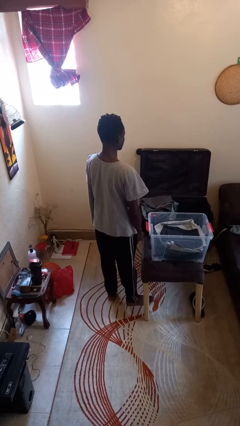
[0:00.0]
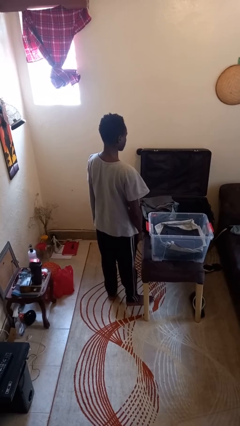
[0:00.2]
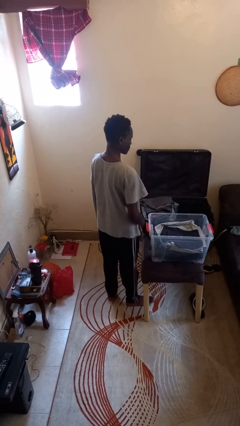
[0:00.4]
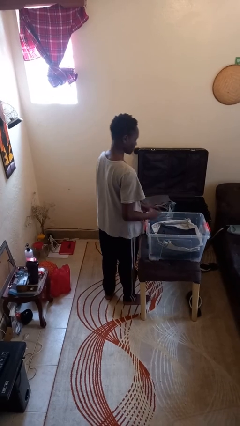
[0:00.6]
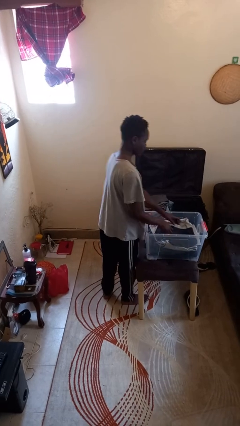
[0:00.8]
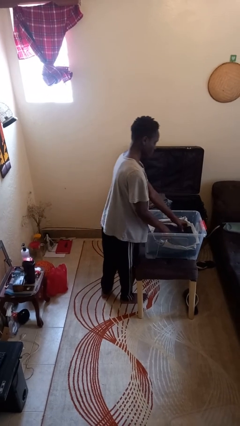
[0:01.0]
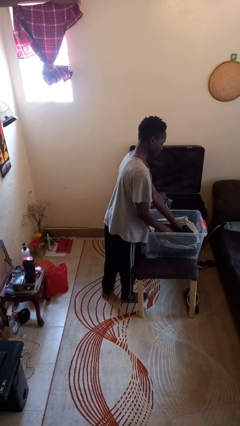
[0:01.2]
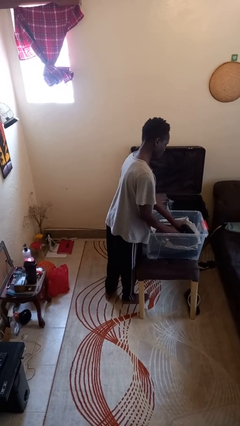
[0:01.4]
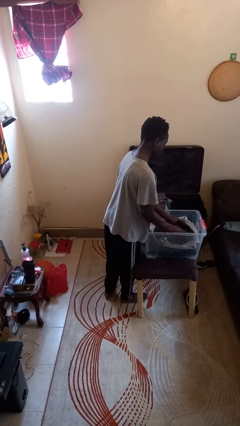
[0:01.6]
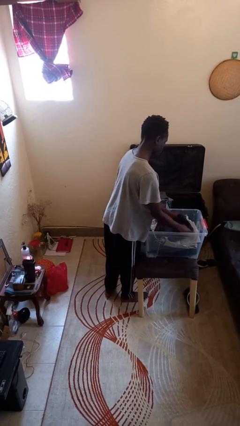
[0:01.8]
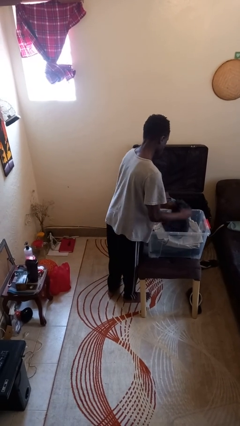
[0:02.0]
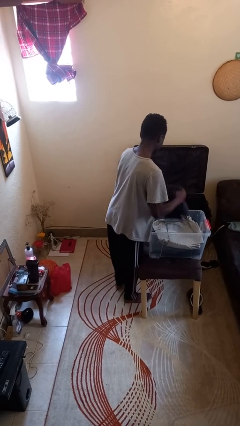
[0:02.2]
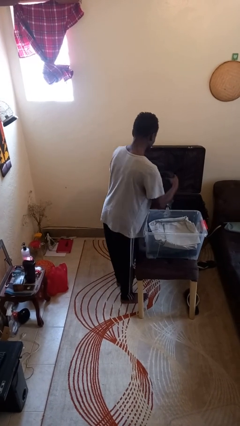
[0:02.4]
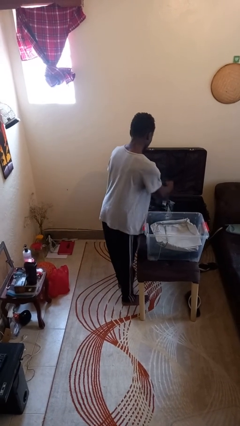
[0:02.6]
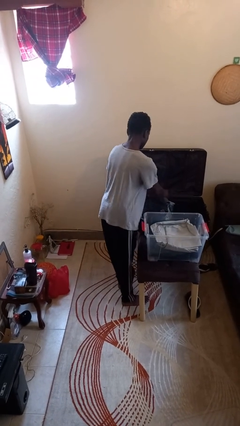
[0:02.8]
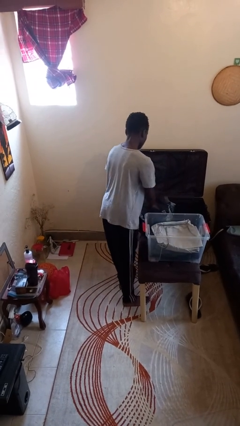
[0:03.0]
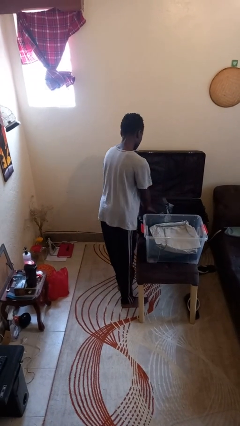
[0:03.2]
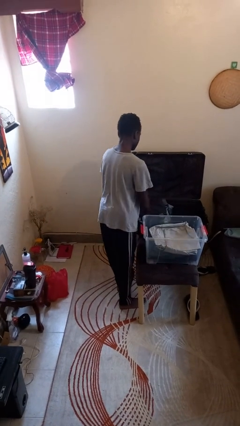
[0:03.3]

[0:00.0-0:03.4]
person loads clothes into suitcase

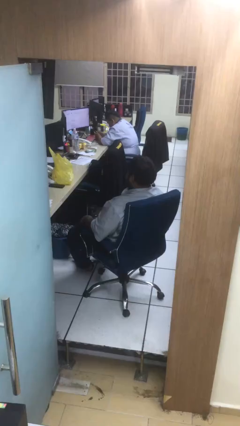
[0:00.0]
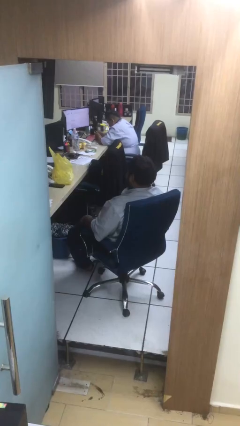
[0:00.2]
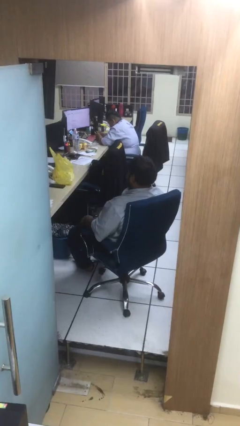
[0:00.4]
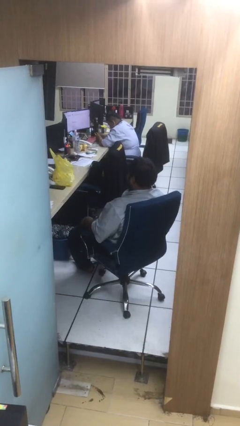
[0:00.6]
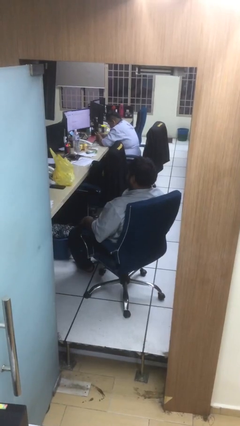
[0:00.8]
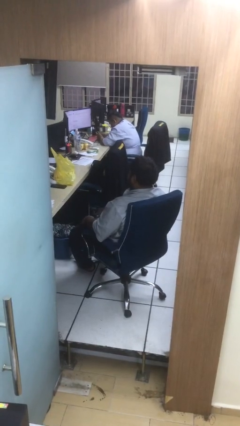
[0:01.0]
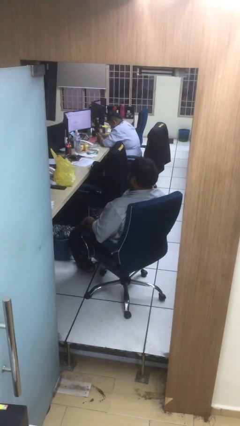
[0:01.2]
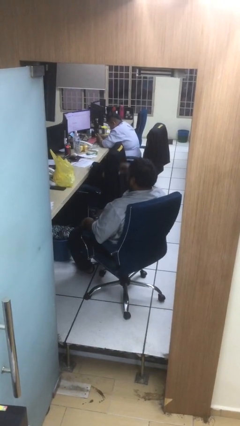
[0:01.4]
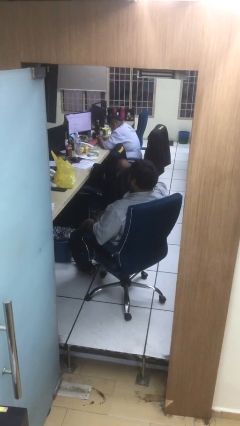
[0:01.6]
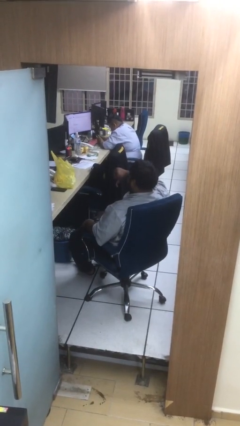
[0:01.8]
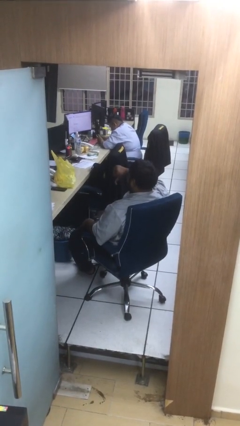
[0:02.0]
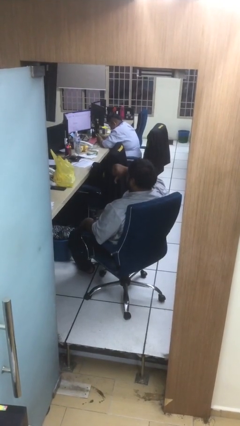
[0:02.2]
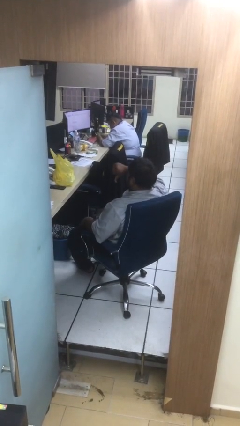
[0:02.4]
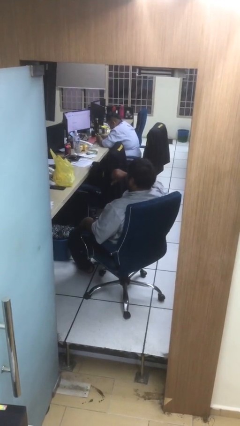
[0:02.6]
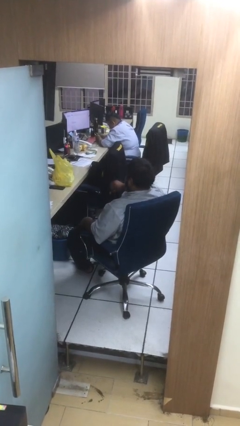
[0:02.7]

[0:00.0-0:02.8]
person gestures thumbs down

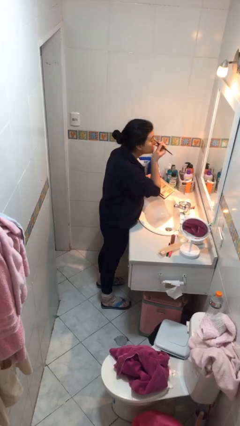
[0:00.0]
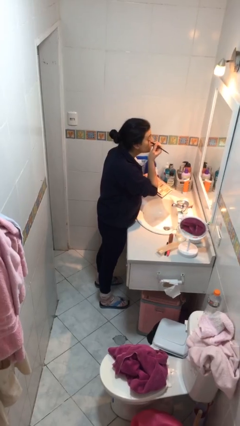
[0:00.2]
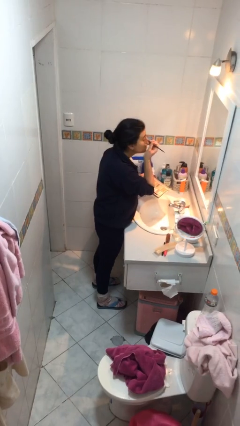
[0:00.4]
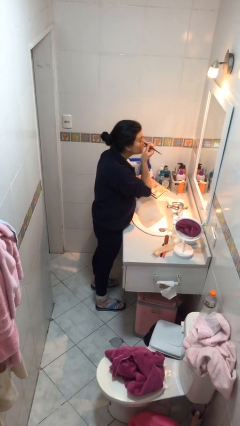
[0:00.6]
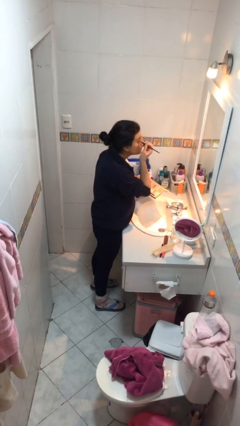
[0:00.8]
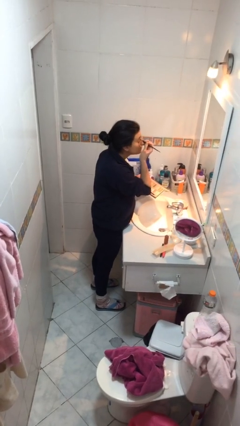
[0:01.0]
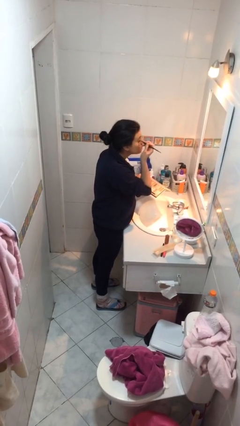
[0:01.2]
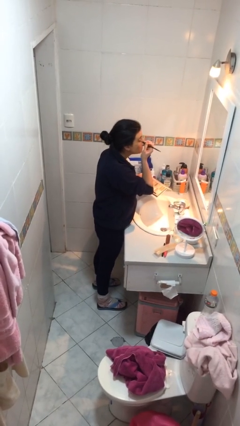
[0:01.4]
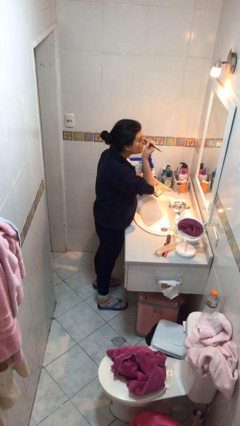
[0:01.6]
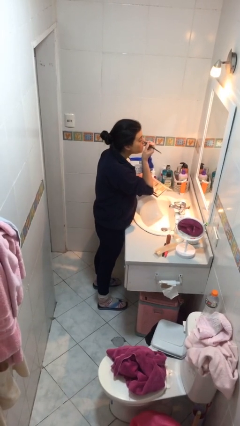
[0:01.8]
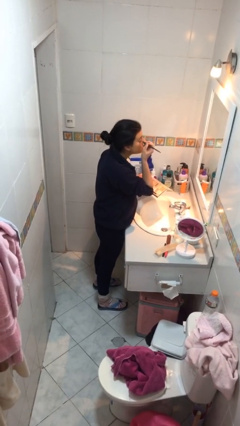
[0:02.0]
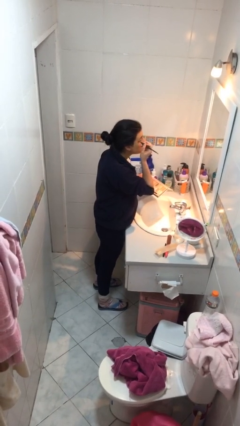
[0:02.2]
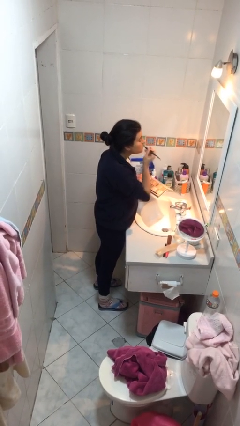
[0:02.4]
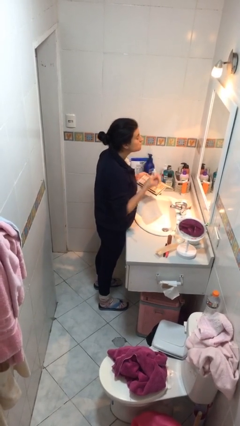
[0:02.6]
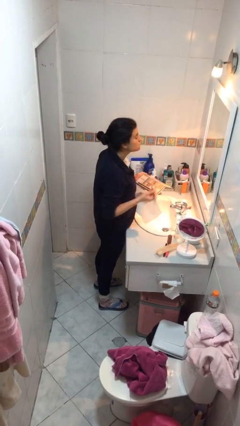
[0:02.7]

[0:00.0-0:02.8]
person applies eye makeup

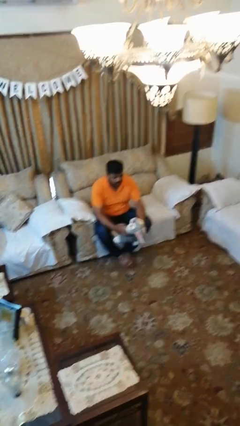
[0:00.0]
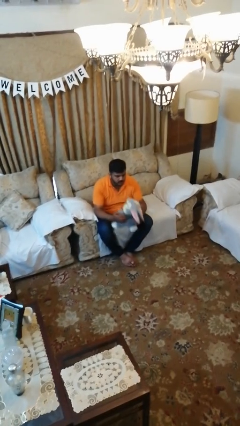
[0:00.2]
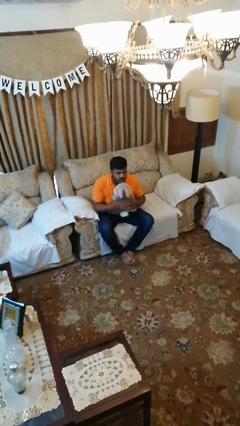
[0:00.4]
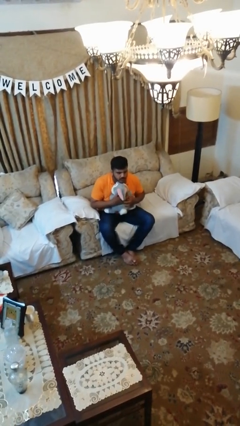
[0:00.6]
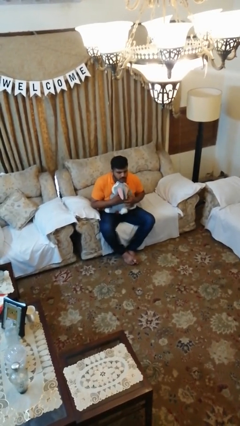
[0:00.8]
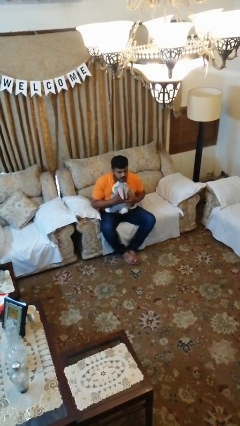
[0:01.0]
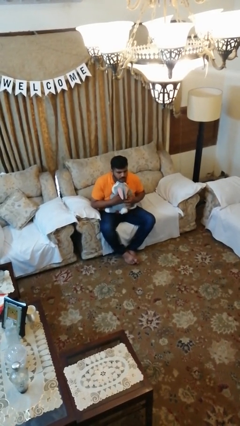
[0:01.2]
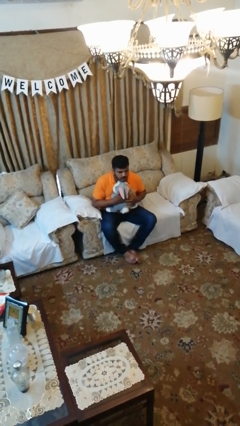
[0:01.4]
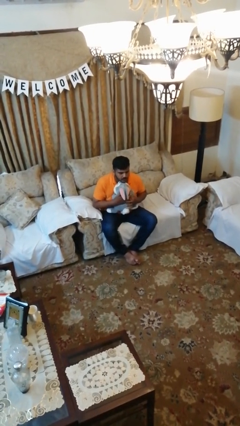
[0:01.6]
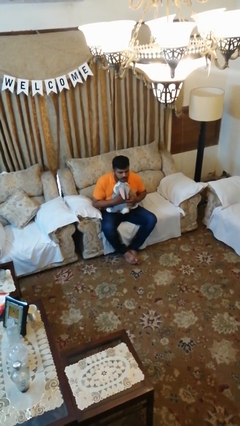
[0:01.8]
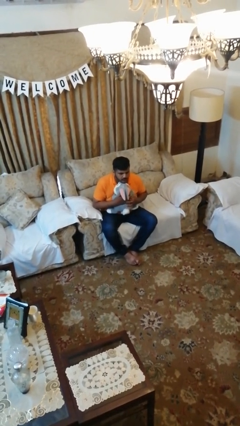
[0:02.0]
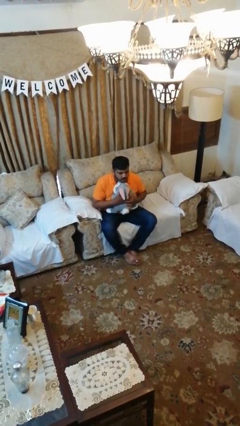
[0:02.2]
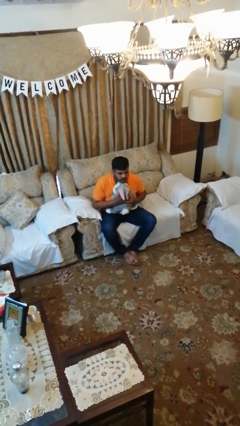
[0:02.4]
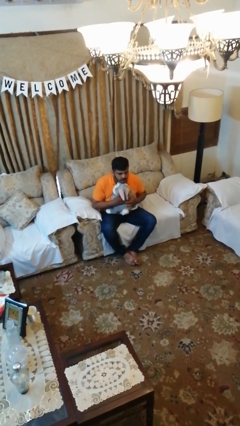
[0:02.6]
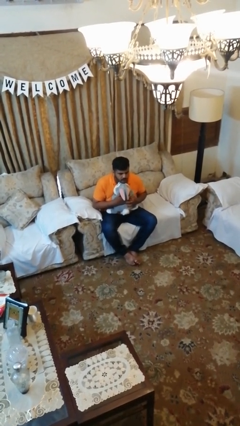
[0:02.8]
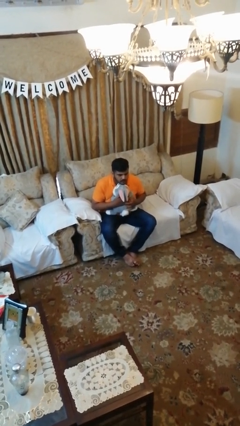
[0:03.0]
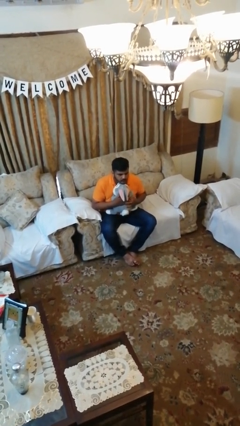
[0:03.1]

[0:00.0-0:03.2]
person hugs stuffed animal

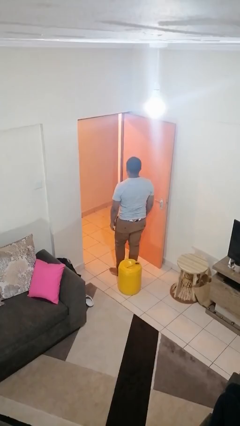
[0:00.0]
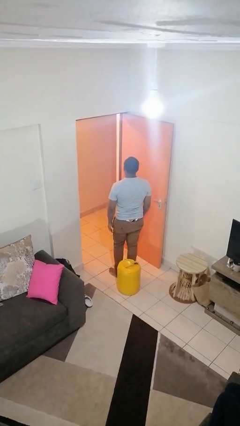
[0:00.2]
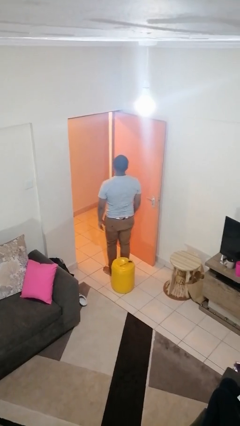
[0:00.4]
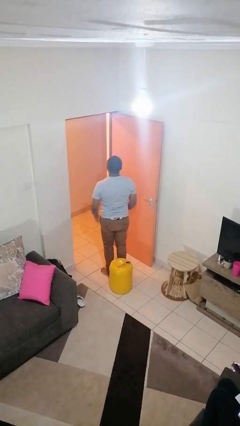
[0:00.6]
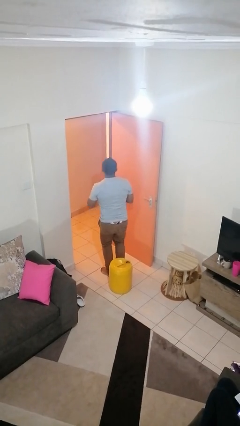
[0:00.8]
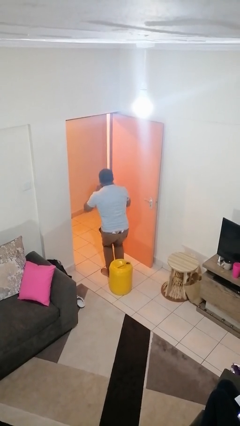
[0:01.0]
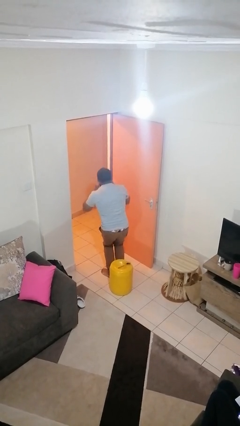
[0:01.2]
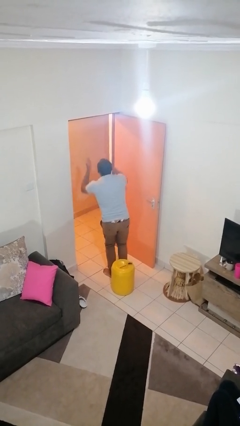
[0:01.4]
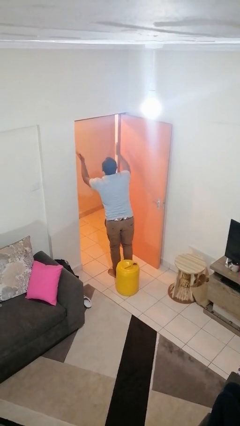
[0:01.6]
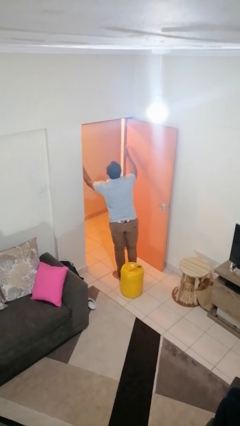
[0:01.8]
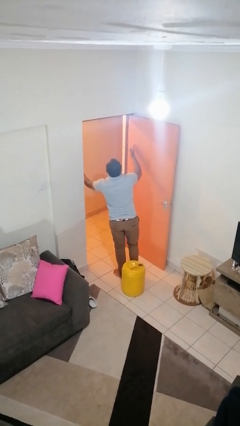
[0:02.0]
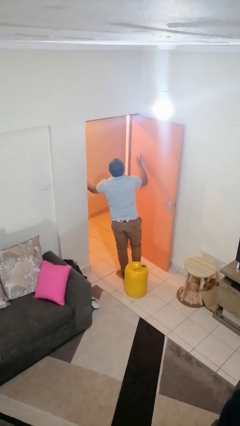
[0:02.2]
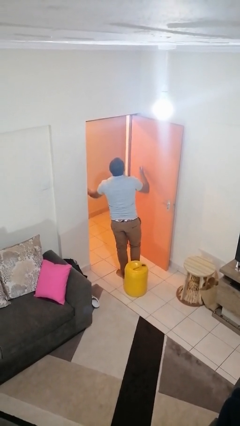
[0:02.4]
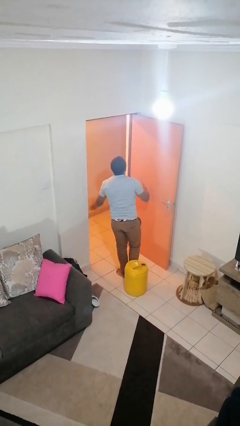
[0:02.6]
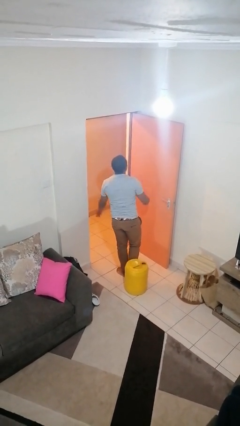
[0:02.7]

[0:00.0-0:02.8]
person gestures blow kiss

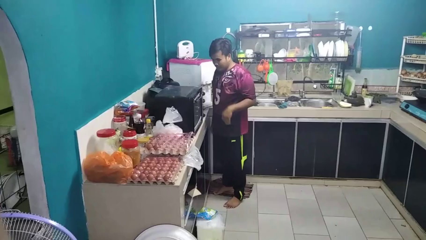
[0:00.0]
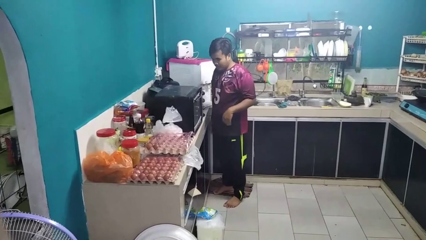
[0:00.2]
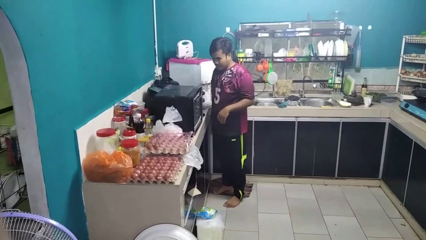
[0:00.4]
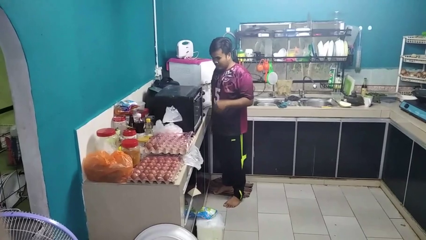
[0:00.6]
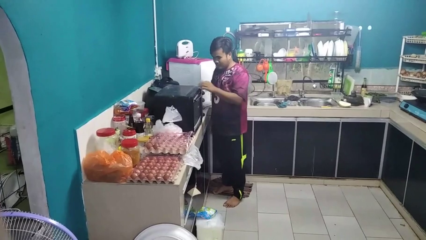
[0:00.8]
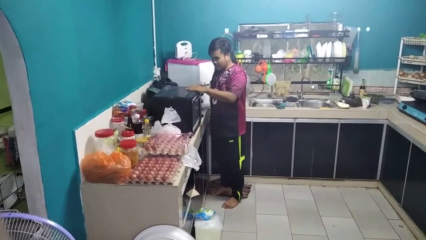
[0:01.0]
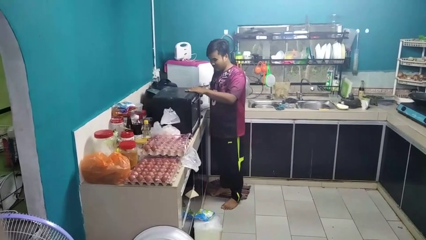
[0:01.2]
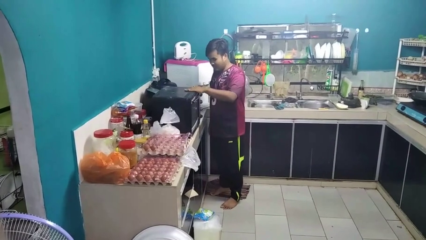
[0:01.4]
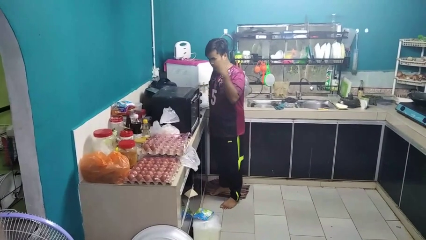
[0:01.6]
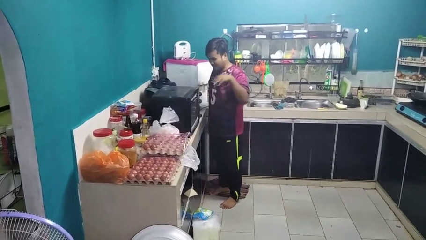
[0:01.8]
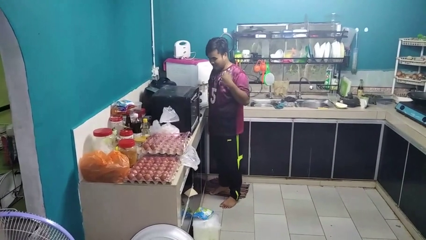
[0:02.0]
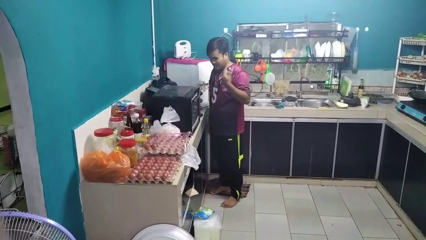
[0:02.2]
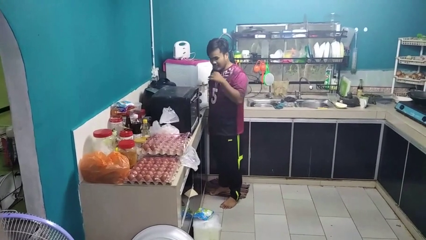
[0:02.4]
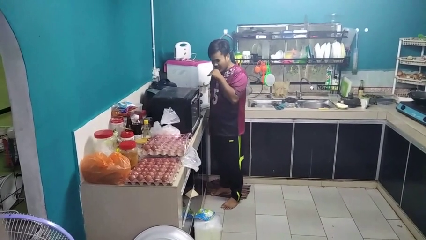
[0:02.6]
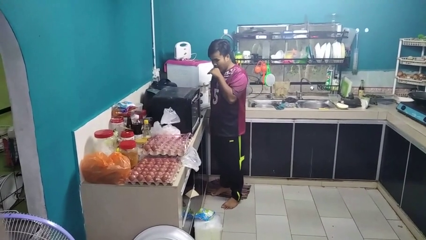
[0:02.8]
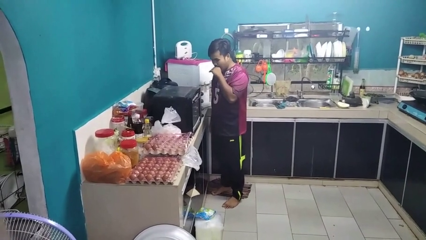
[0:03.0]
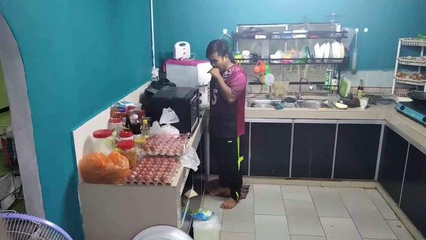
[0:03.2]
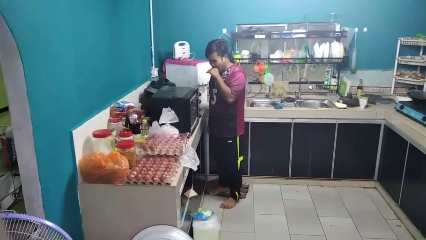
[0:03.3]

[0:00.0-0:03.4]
person burns hand
